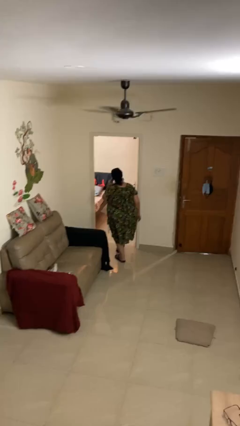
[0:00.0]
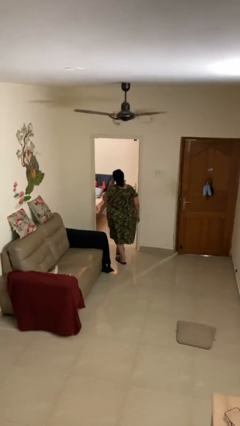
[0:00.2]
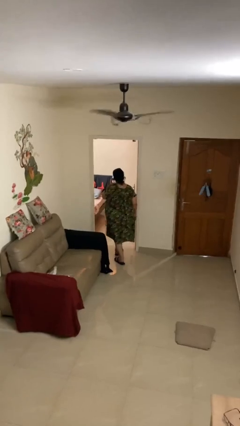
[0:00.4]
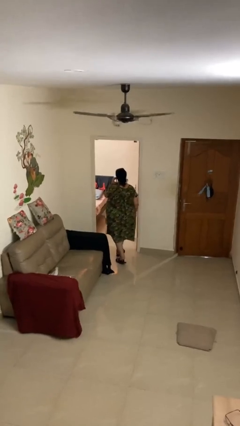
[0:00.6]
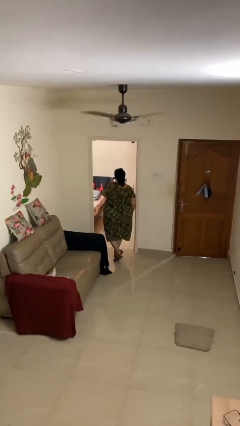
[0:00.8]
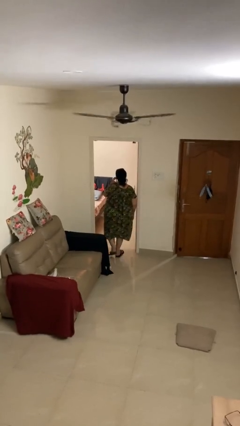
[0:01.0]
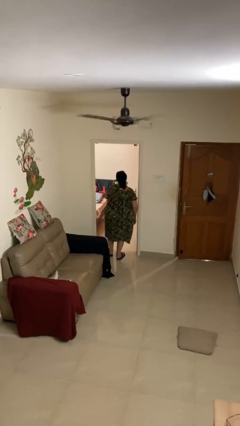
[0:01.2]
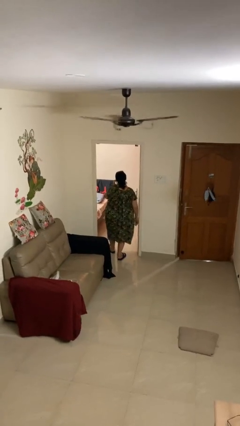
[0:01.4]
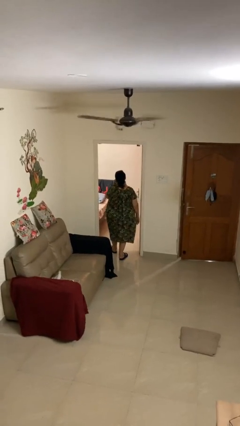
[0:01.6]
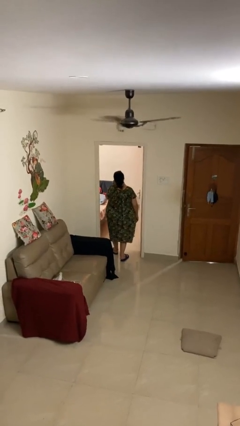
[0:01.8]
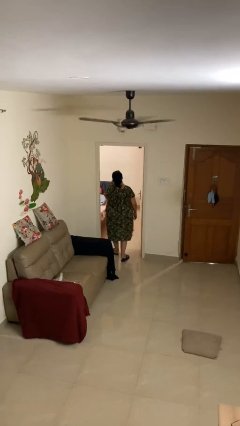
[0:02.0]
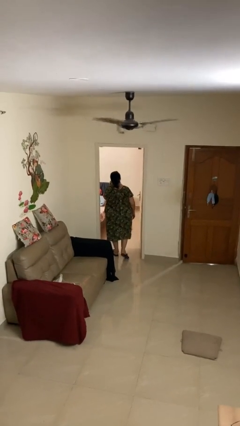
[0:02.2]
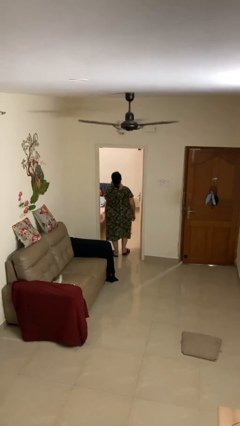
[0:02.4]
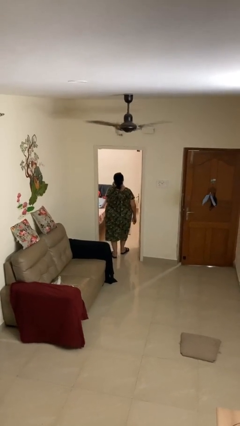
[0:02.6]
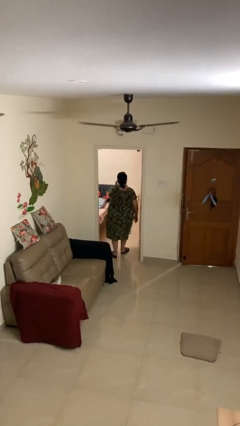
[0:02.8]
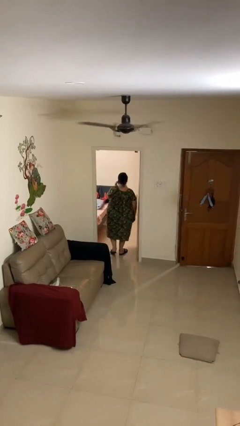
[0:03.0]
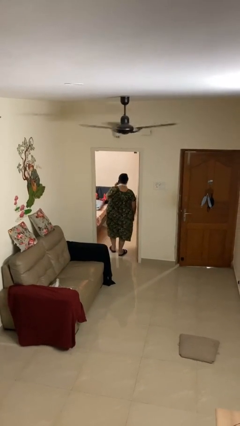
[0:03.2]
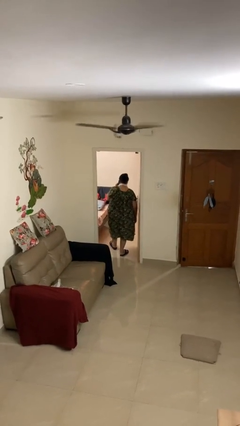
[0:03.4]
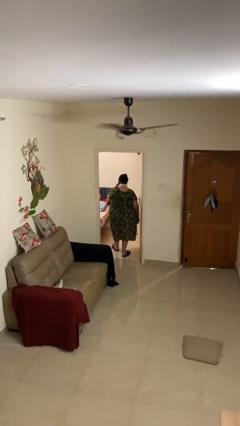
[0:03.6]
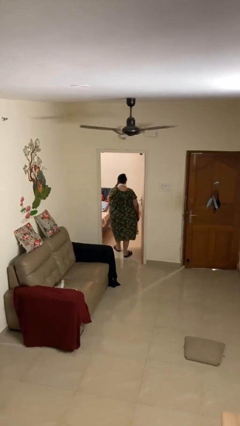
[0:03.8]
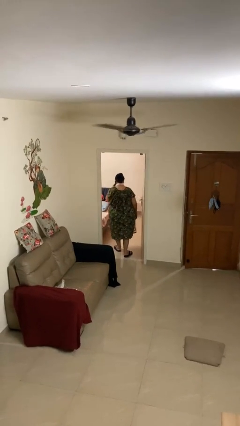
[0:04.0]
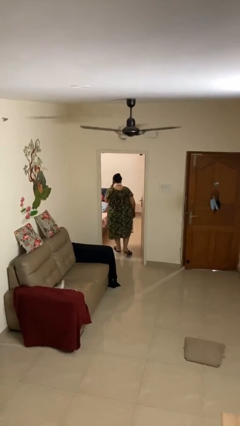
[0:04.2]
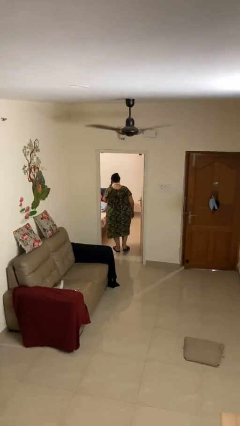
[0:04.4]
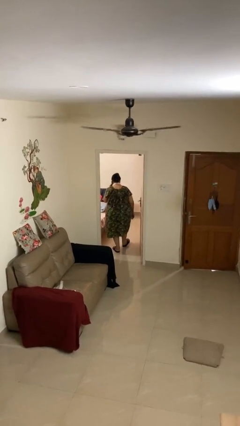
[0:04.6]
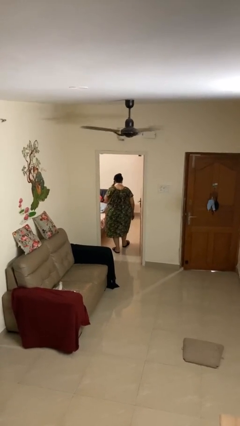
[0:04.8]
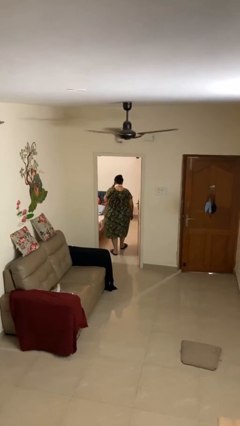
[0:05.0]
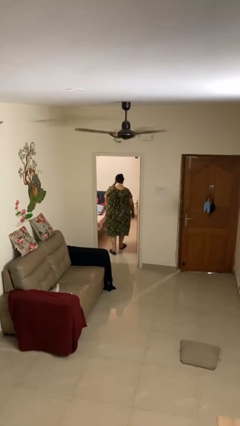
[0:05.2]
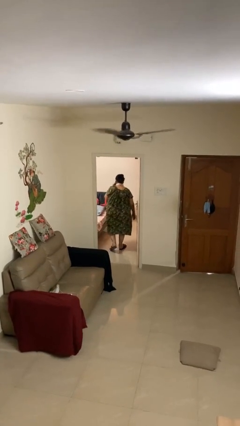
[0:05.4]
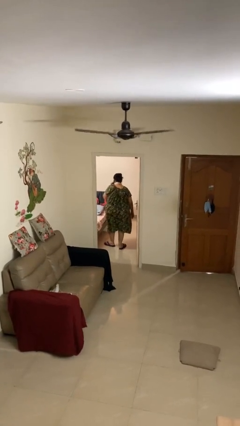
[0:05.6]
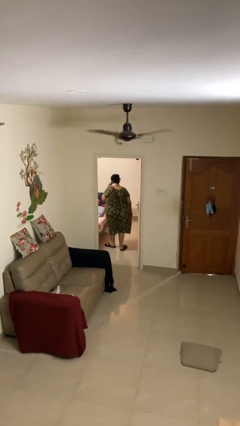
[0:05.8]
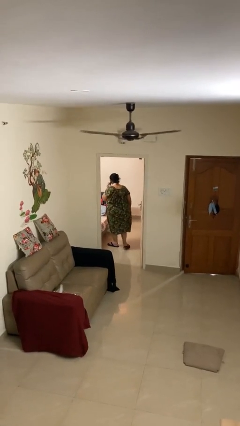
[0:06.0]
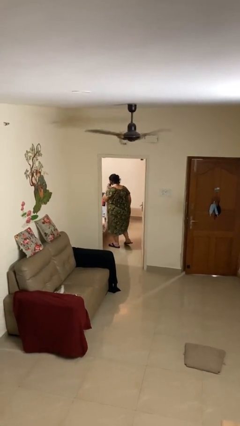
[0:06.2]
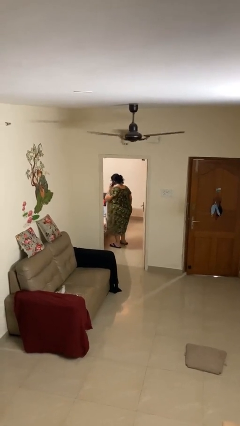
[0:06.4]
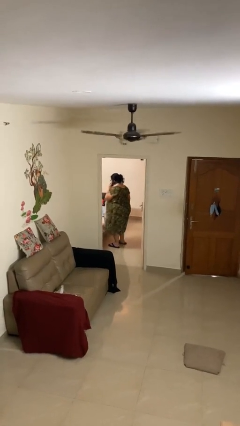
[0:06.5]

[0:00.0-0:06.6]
person exits scene through structure

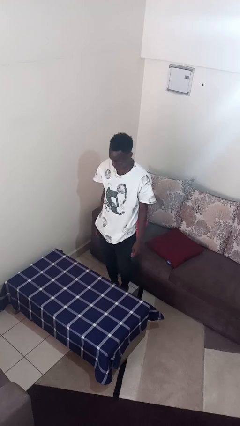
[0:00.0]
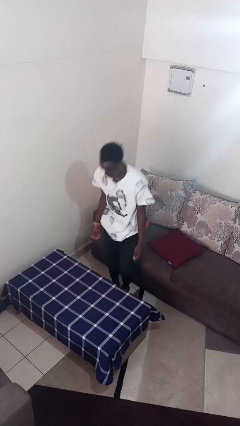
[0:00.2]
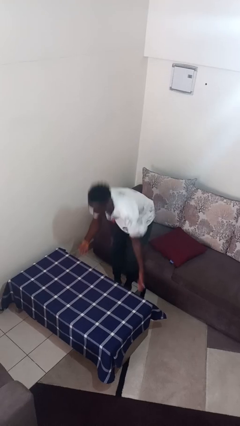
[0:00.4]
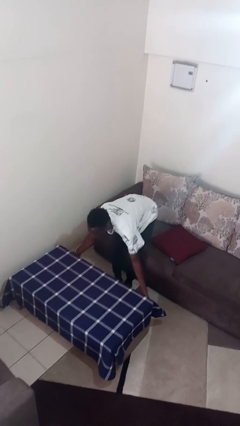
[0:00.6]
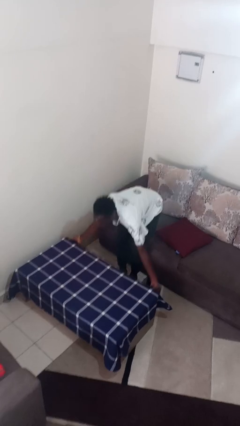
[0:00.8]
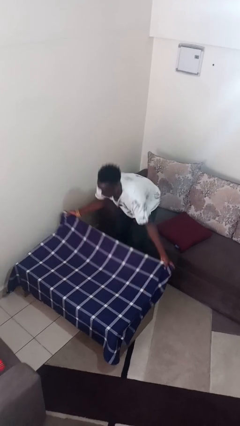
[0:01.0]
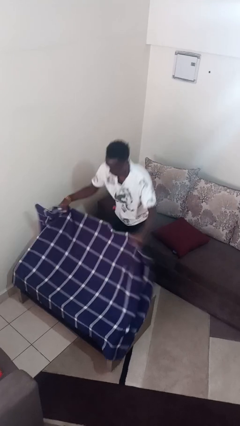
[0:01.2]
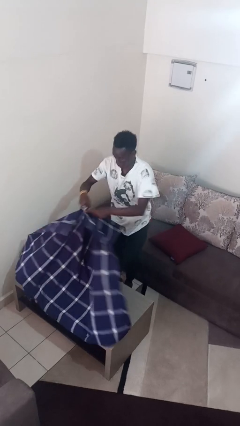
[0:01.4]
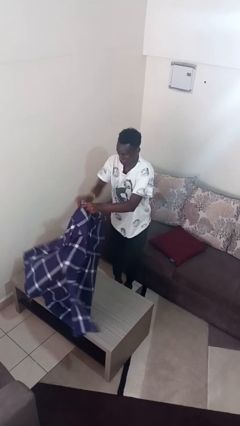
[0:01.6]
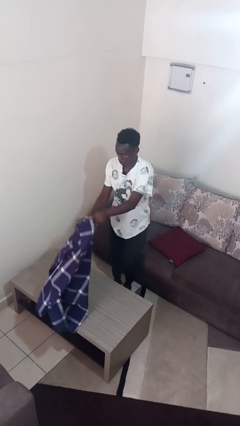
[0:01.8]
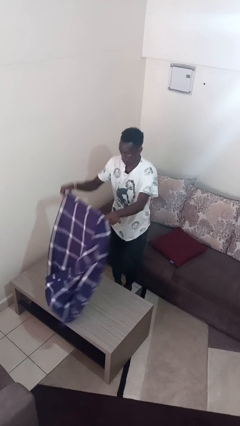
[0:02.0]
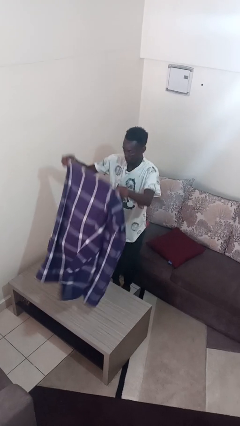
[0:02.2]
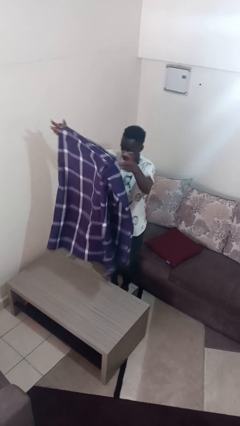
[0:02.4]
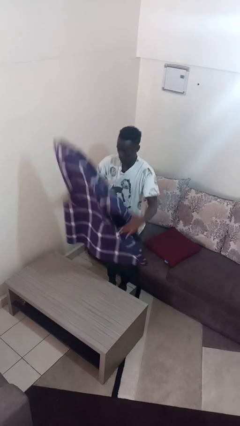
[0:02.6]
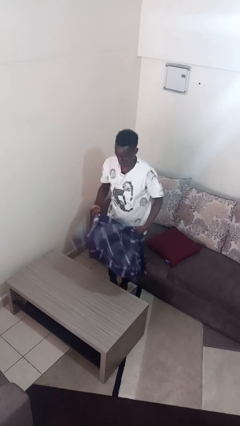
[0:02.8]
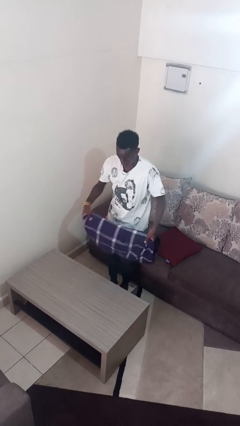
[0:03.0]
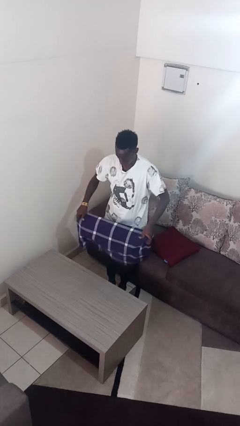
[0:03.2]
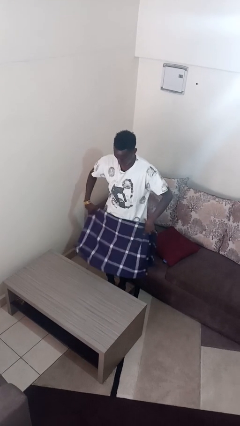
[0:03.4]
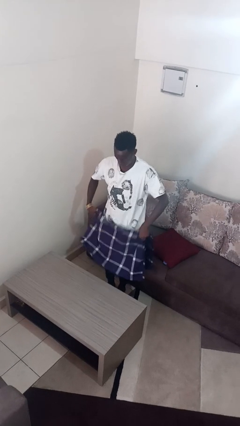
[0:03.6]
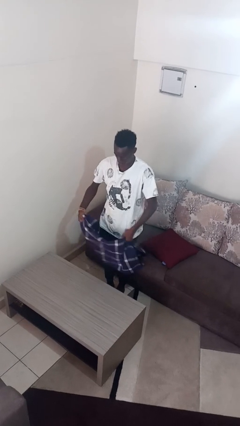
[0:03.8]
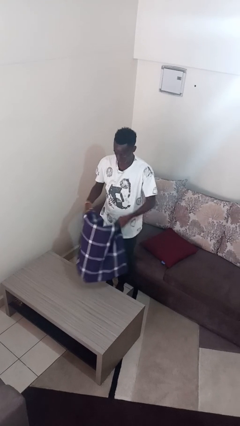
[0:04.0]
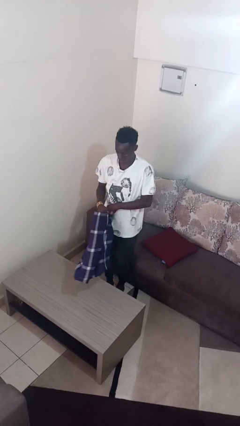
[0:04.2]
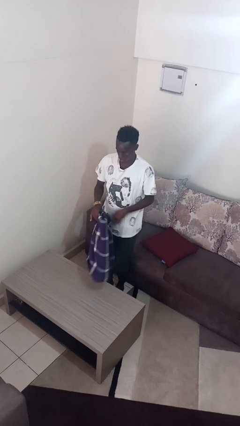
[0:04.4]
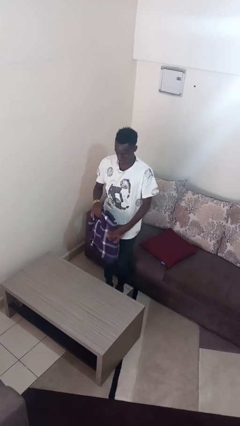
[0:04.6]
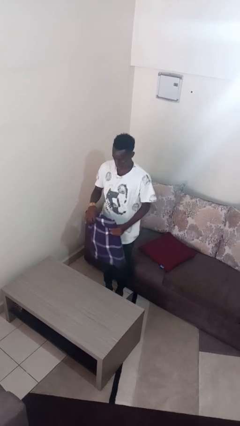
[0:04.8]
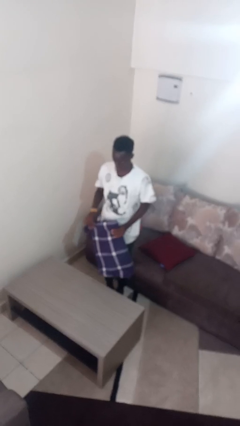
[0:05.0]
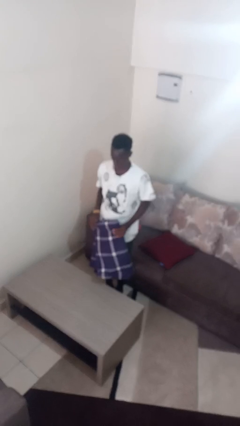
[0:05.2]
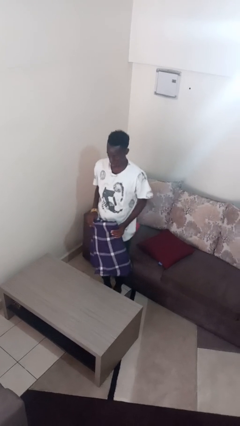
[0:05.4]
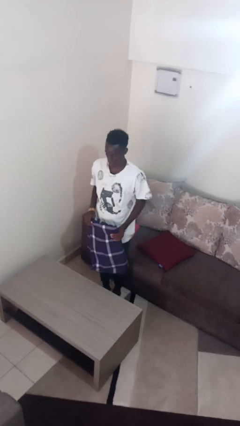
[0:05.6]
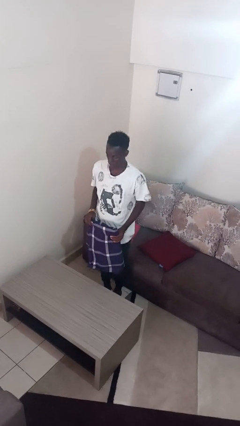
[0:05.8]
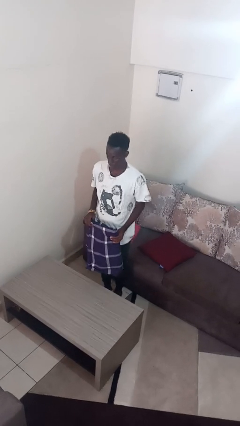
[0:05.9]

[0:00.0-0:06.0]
person folds tablecloth

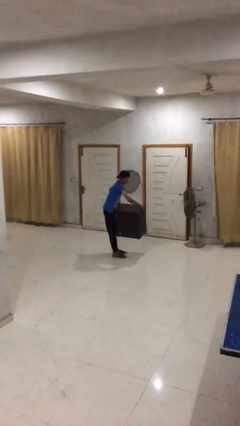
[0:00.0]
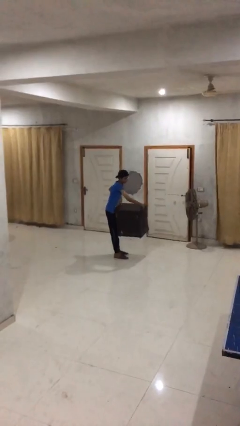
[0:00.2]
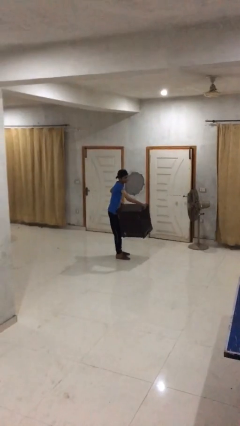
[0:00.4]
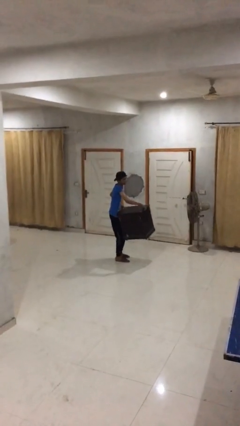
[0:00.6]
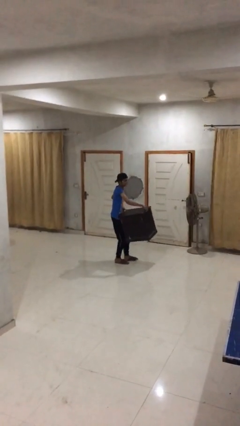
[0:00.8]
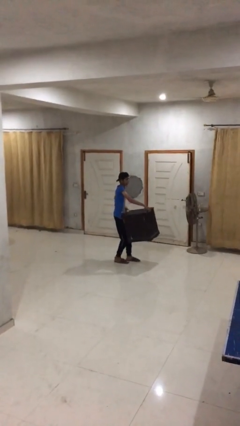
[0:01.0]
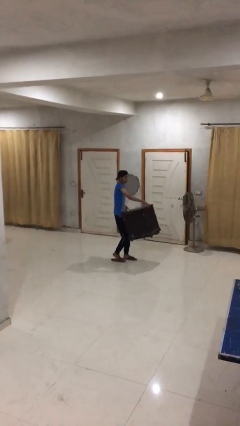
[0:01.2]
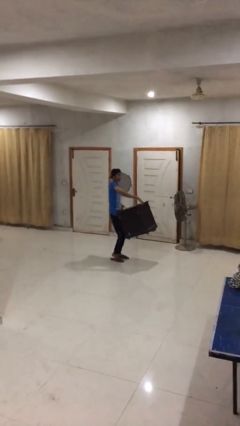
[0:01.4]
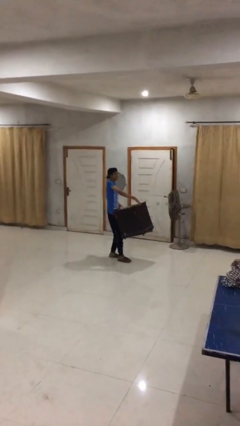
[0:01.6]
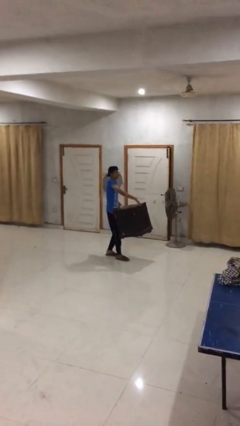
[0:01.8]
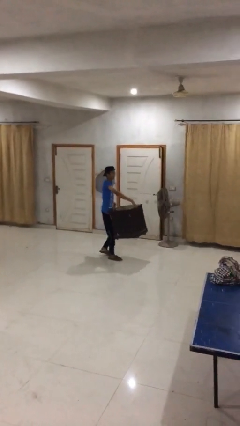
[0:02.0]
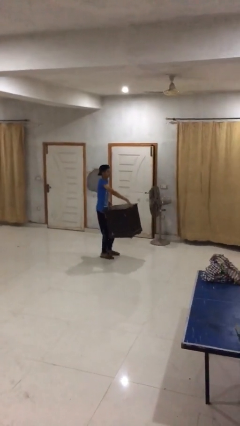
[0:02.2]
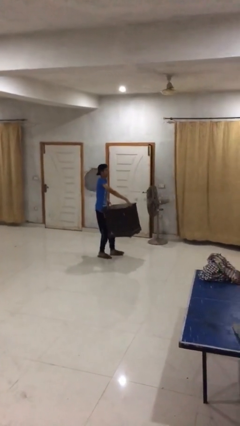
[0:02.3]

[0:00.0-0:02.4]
person carries heavy object

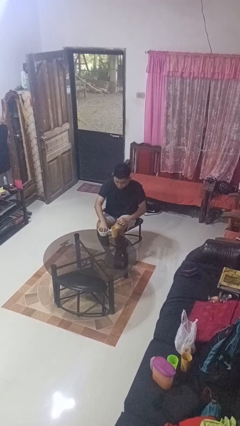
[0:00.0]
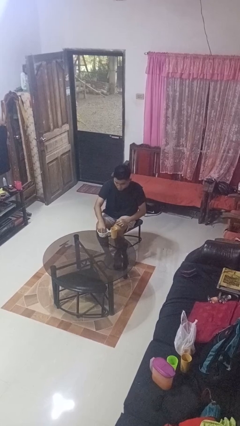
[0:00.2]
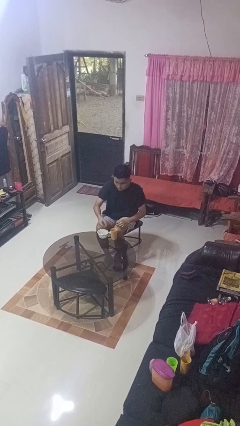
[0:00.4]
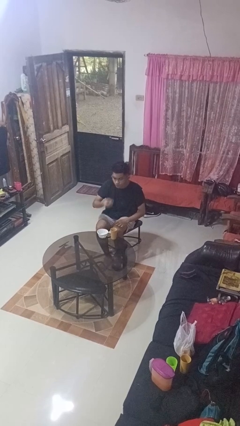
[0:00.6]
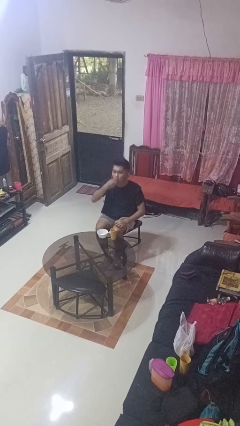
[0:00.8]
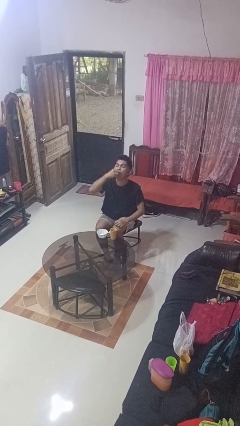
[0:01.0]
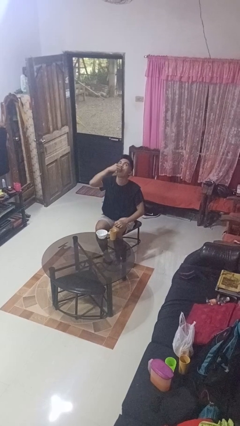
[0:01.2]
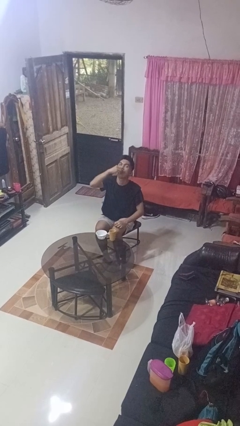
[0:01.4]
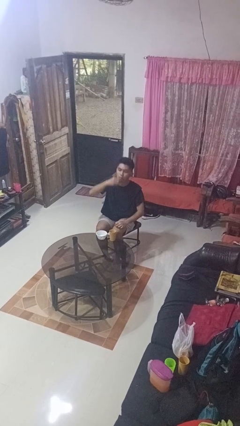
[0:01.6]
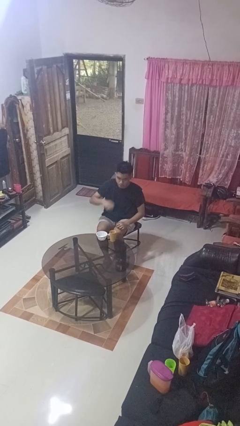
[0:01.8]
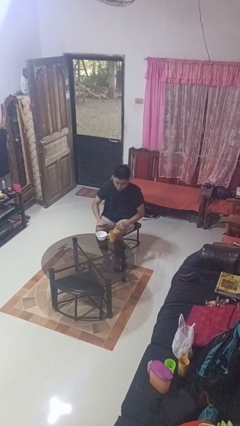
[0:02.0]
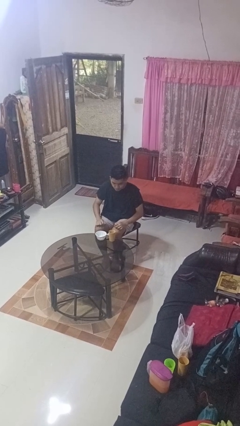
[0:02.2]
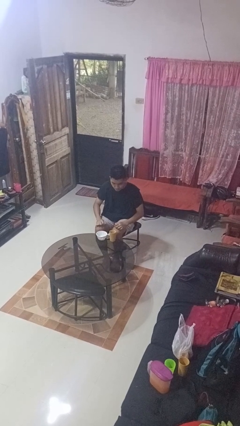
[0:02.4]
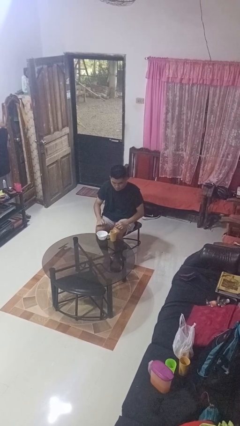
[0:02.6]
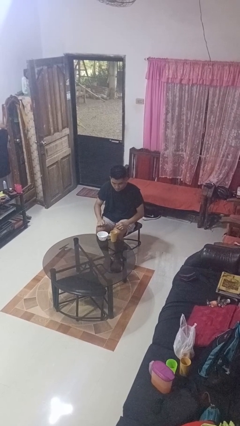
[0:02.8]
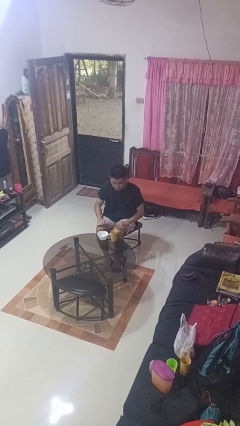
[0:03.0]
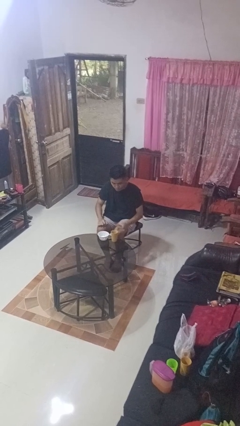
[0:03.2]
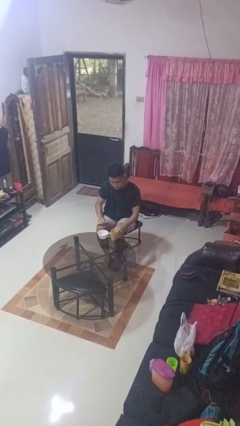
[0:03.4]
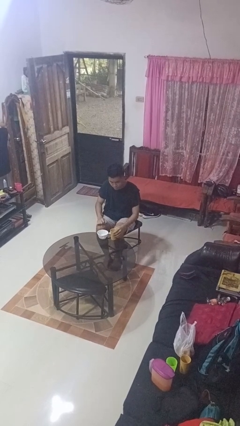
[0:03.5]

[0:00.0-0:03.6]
person takes medicine pills
